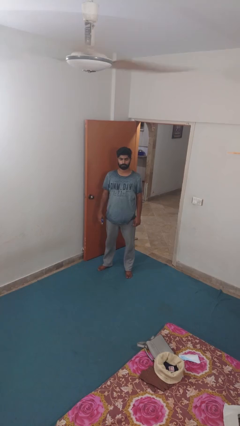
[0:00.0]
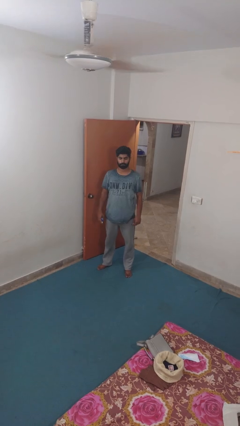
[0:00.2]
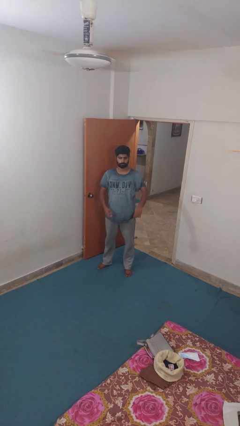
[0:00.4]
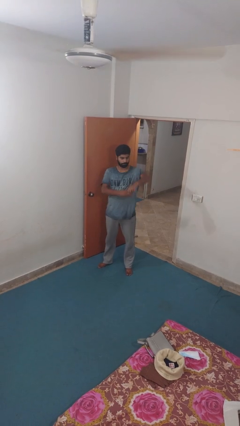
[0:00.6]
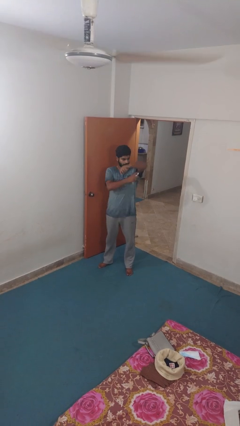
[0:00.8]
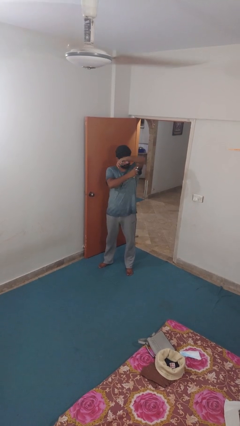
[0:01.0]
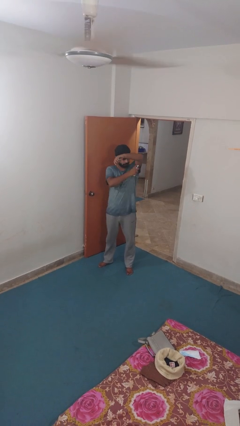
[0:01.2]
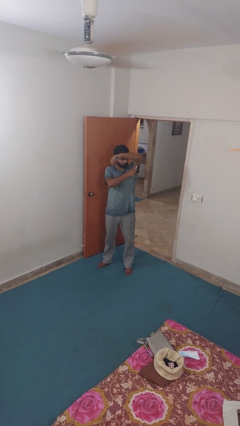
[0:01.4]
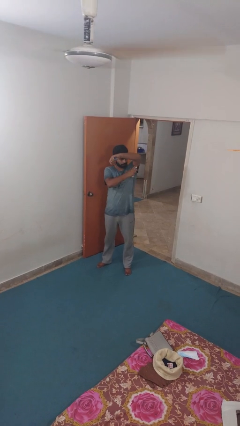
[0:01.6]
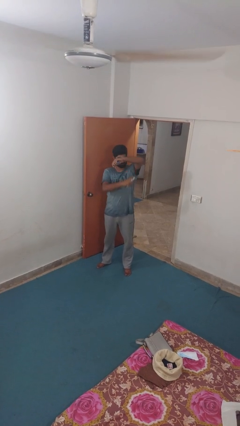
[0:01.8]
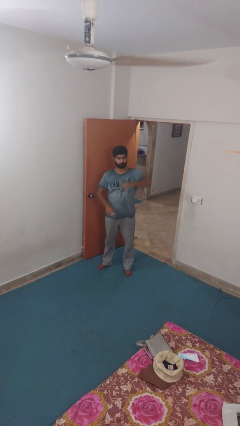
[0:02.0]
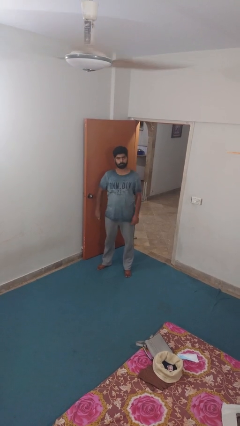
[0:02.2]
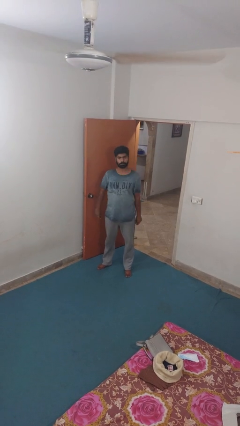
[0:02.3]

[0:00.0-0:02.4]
person applies deodorant

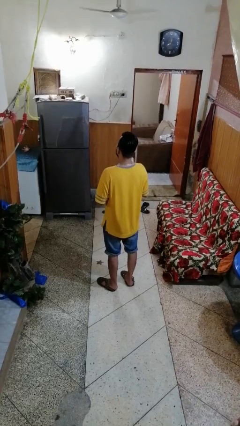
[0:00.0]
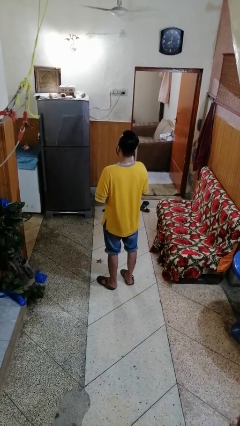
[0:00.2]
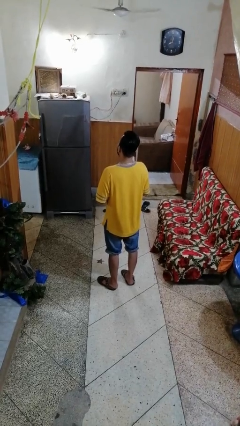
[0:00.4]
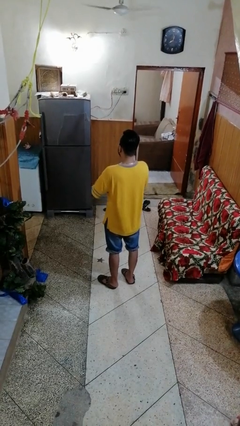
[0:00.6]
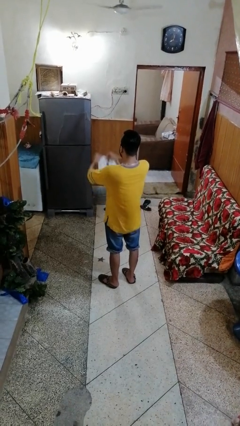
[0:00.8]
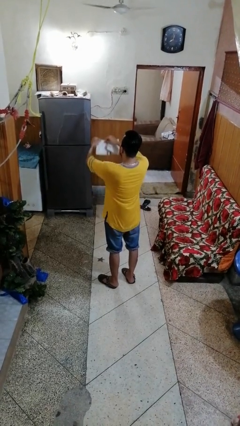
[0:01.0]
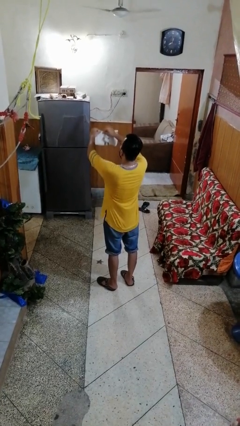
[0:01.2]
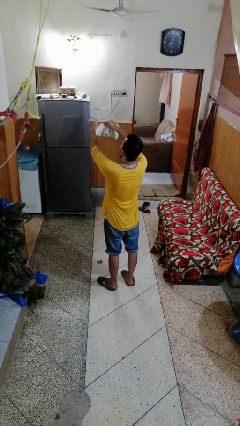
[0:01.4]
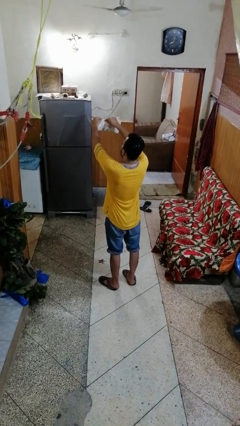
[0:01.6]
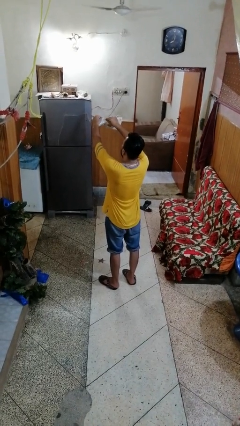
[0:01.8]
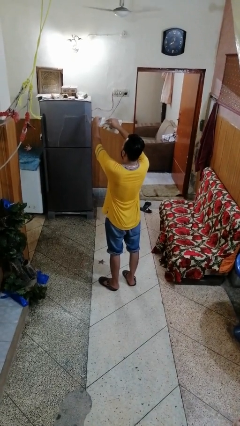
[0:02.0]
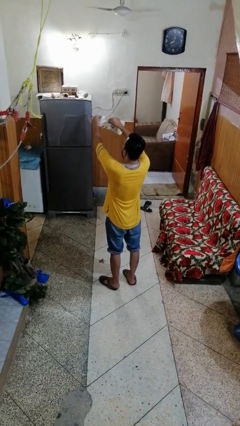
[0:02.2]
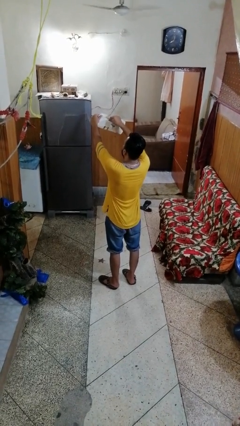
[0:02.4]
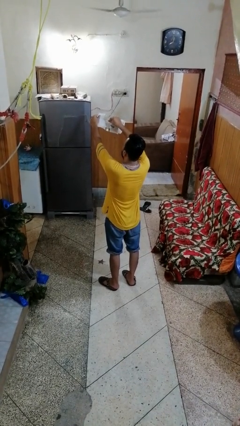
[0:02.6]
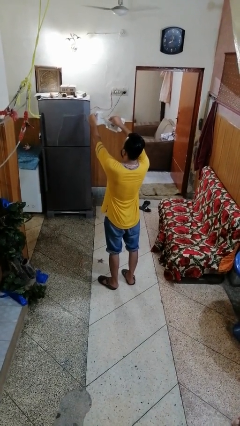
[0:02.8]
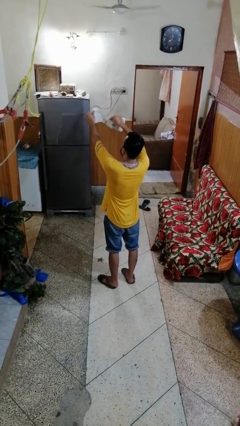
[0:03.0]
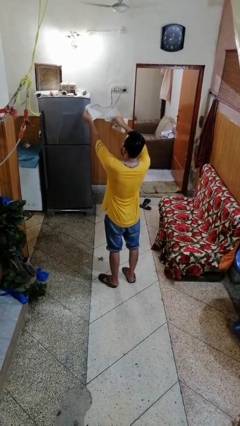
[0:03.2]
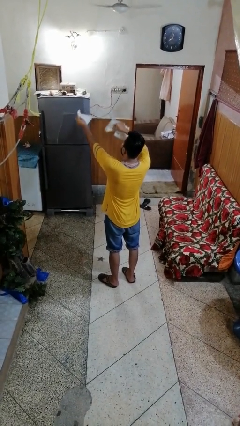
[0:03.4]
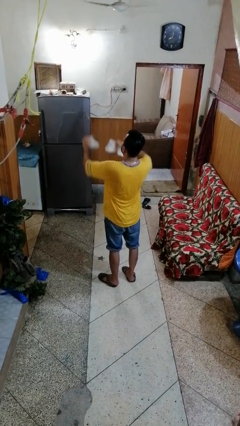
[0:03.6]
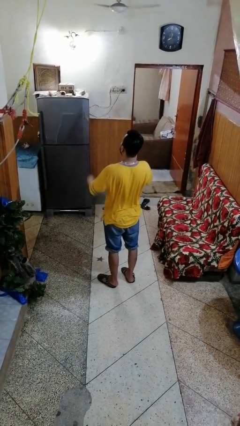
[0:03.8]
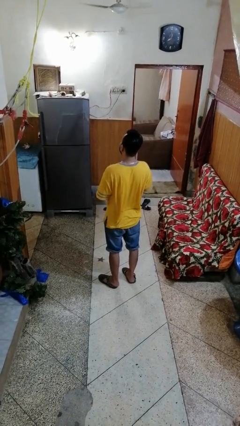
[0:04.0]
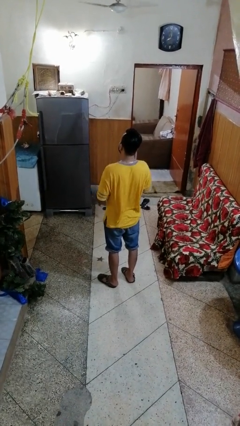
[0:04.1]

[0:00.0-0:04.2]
person tears paper

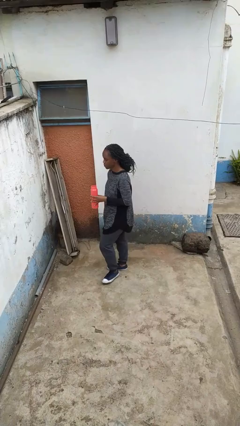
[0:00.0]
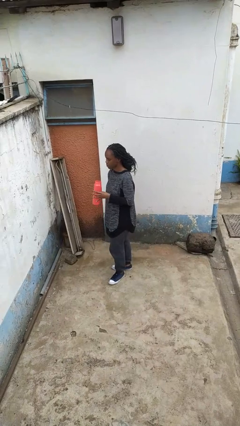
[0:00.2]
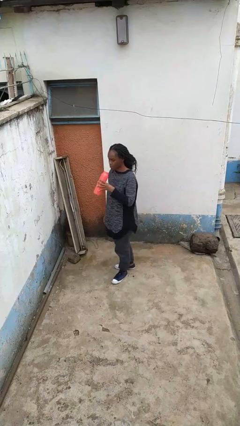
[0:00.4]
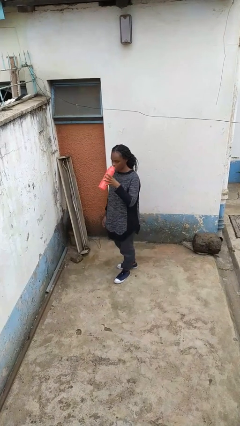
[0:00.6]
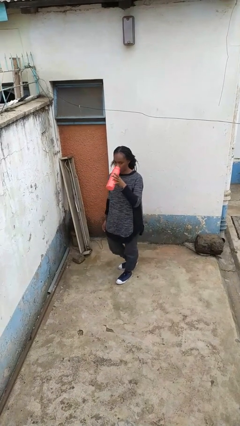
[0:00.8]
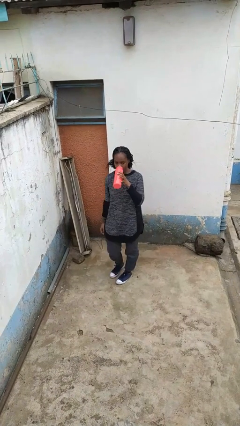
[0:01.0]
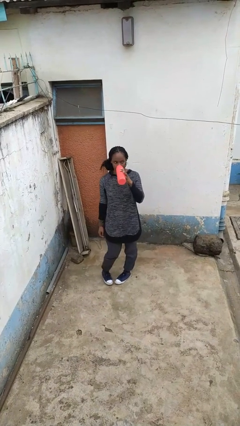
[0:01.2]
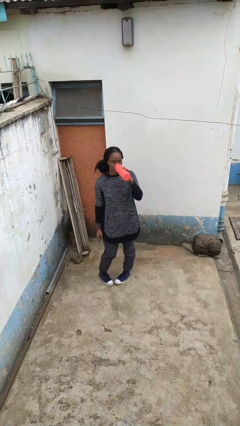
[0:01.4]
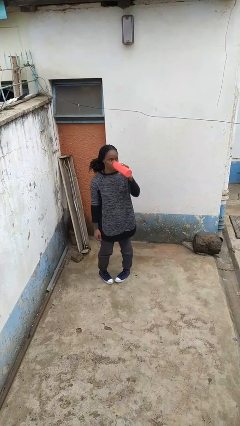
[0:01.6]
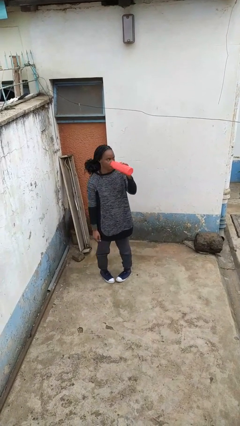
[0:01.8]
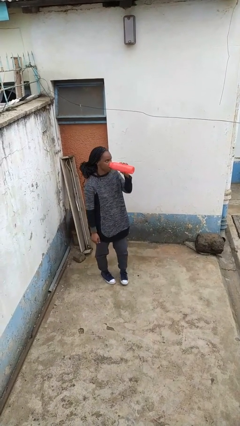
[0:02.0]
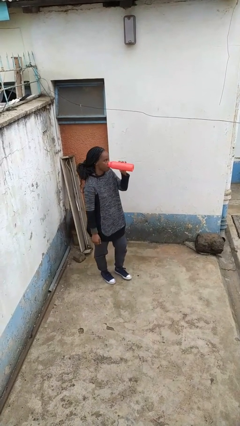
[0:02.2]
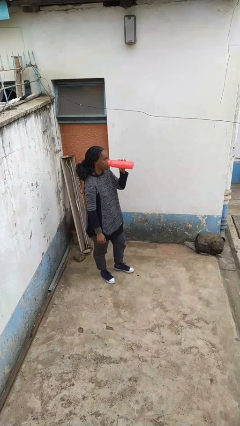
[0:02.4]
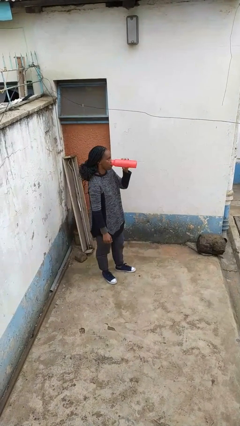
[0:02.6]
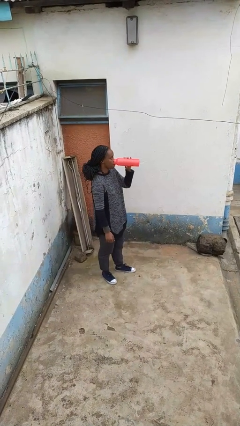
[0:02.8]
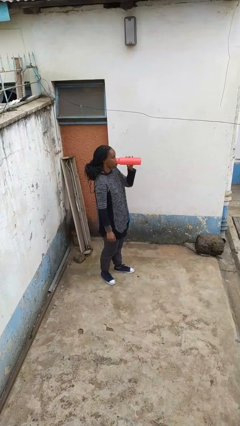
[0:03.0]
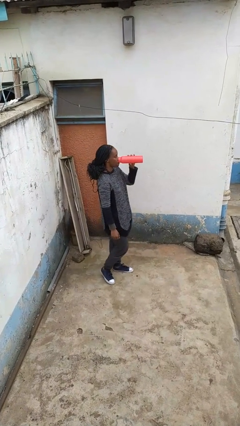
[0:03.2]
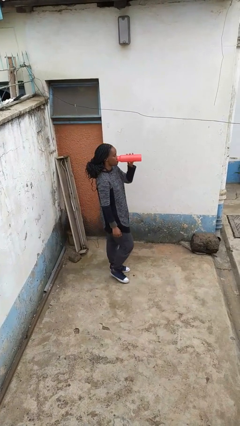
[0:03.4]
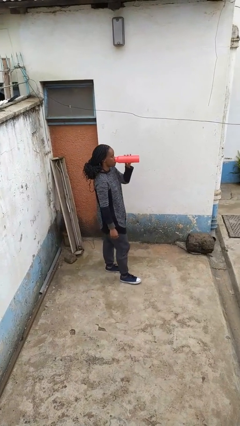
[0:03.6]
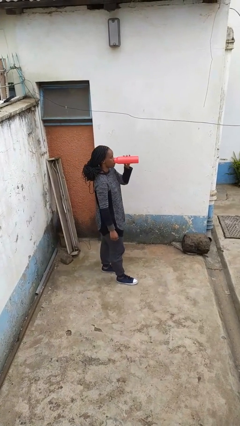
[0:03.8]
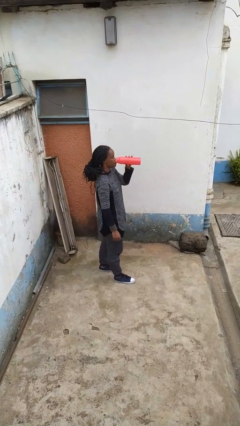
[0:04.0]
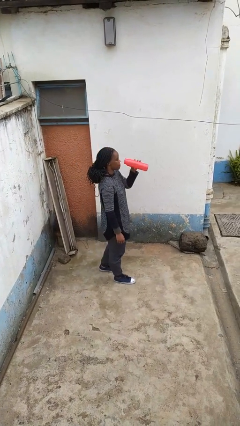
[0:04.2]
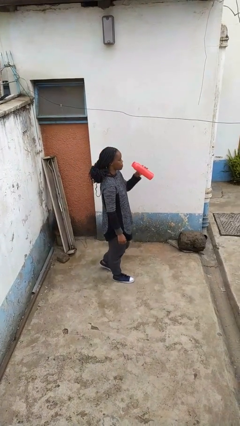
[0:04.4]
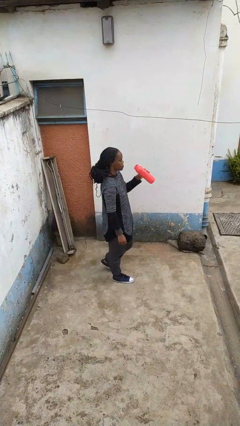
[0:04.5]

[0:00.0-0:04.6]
person drinks from bottle

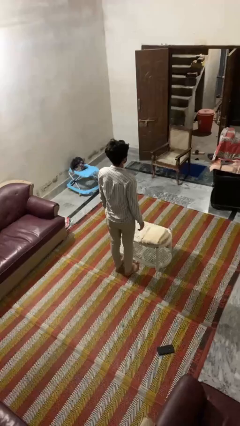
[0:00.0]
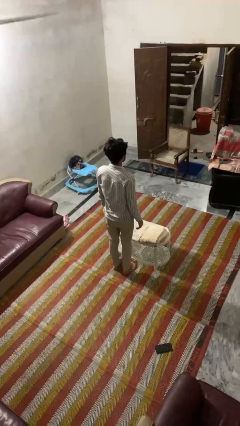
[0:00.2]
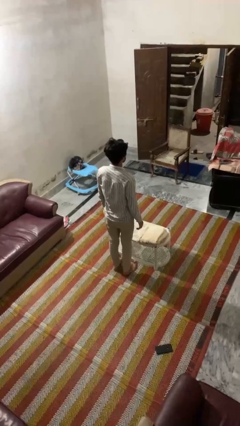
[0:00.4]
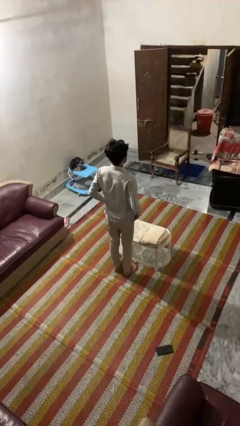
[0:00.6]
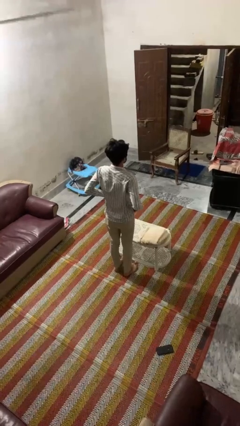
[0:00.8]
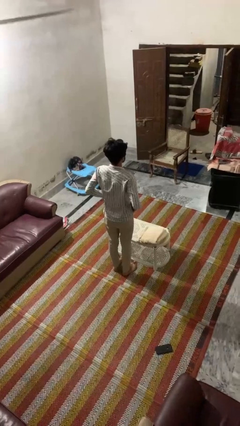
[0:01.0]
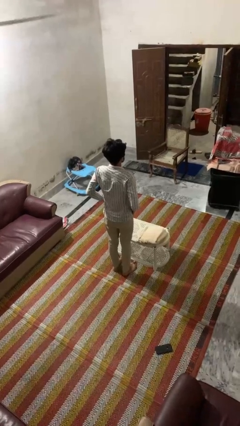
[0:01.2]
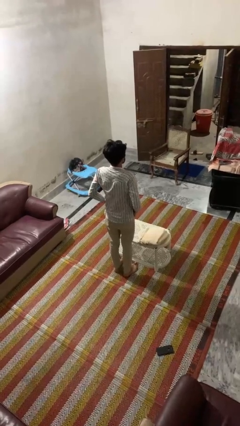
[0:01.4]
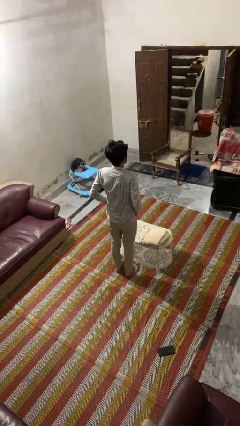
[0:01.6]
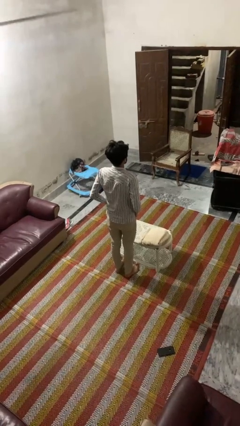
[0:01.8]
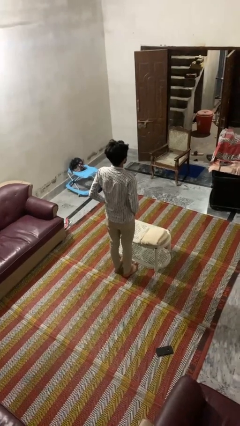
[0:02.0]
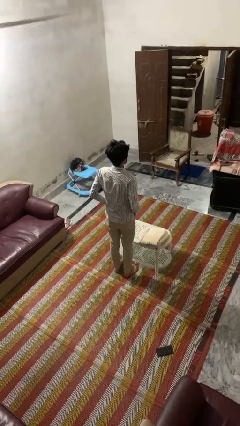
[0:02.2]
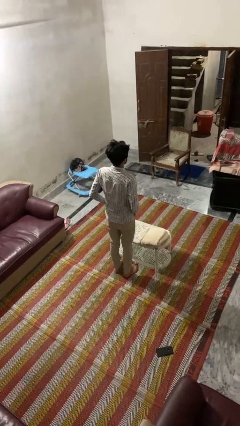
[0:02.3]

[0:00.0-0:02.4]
person puts hands in back pockets

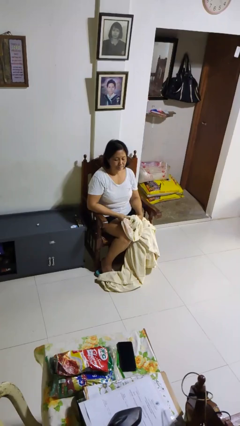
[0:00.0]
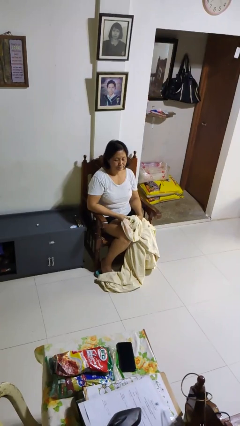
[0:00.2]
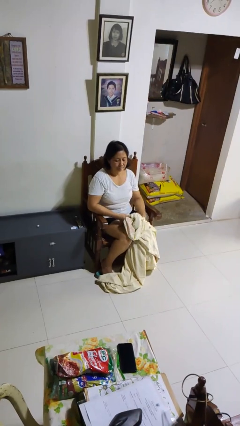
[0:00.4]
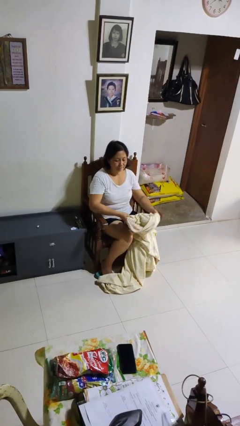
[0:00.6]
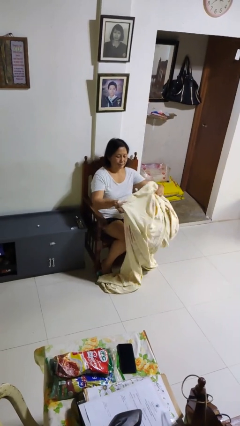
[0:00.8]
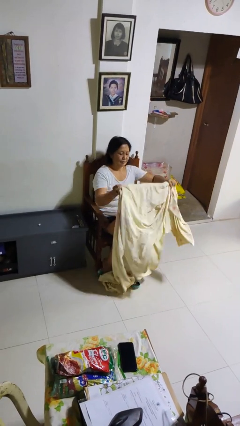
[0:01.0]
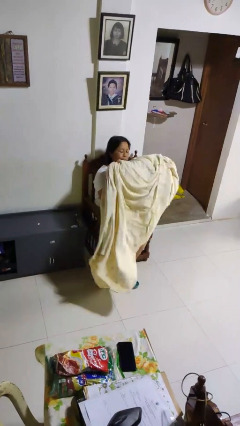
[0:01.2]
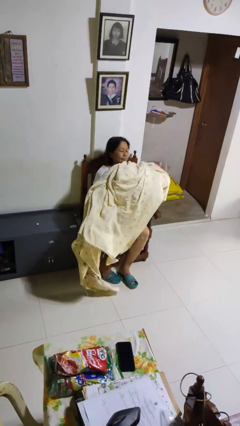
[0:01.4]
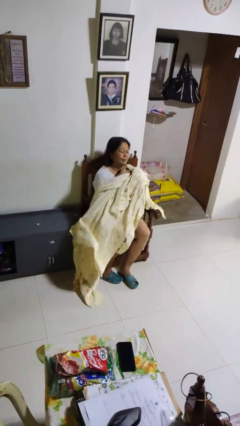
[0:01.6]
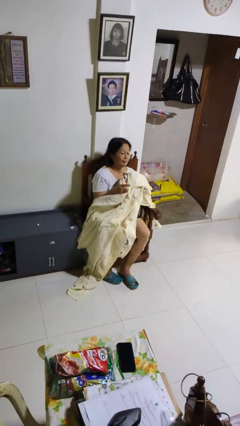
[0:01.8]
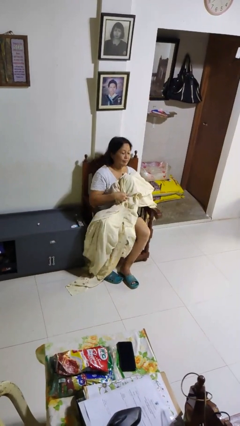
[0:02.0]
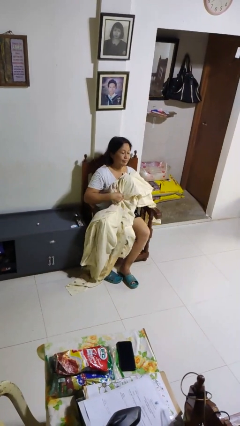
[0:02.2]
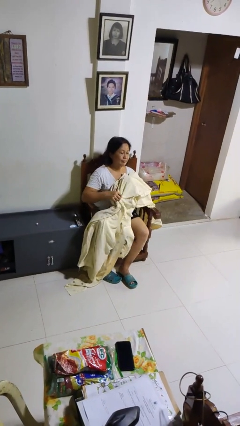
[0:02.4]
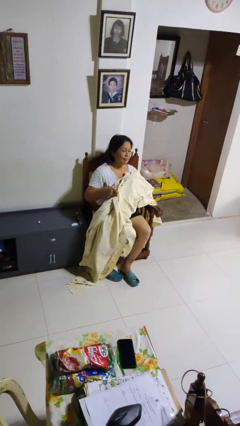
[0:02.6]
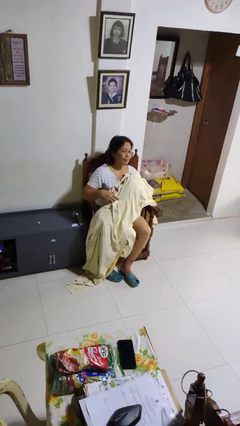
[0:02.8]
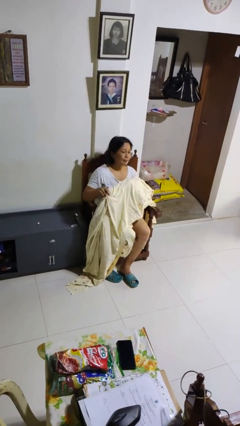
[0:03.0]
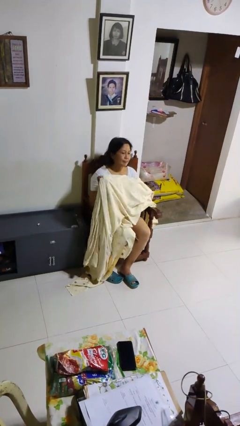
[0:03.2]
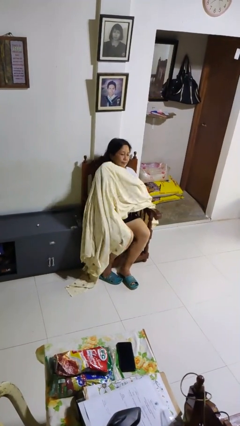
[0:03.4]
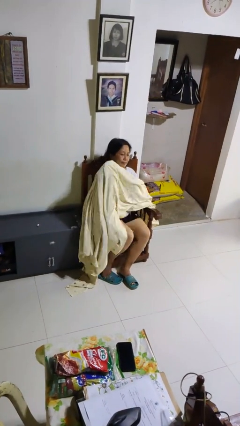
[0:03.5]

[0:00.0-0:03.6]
person covers with blanket

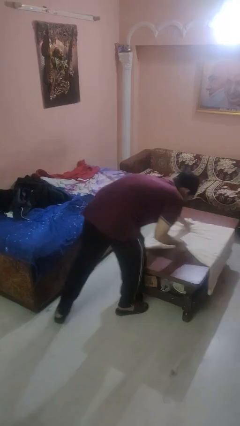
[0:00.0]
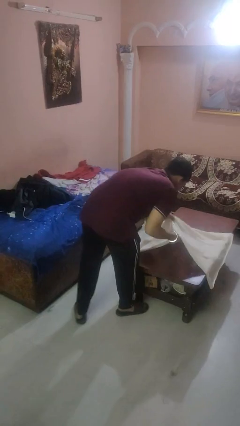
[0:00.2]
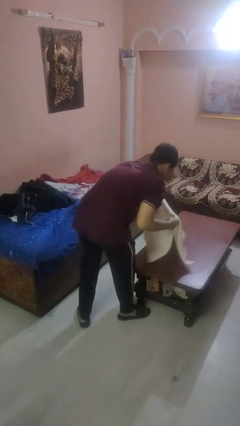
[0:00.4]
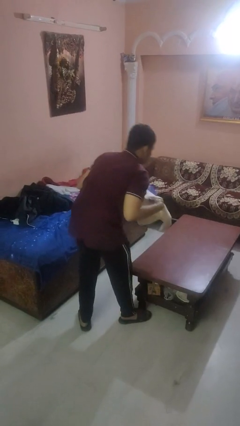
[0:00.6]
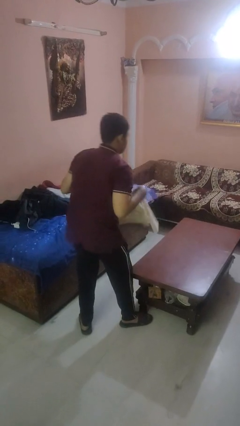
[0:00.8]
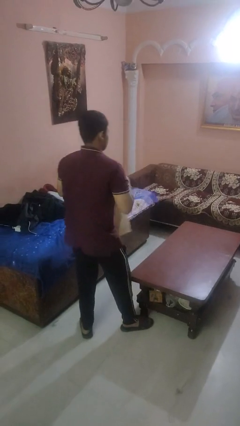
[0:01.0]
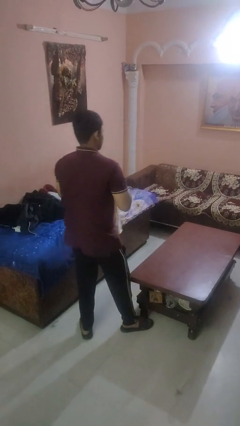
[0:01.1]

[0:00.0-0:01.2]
person folds tablecloth
